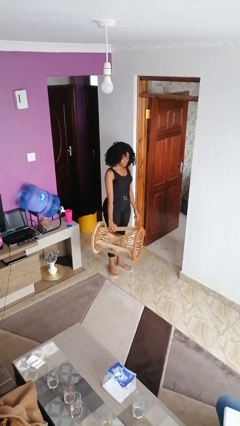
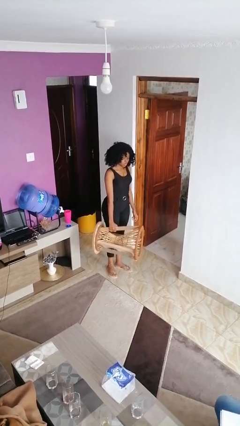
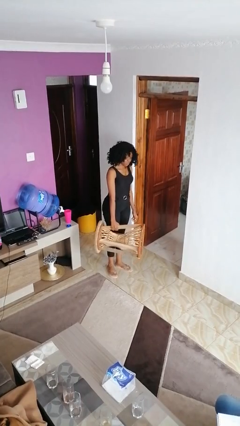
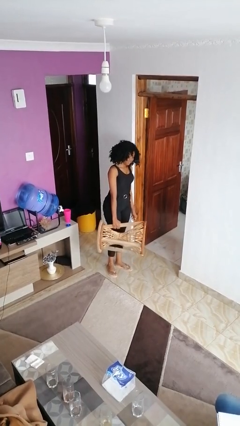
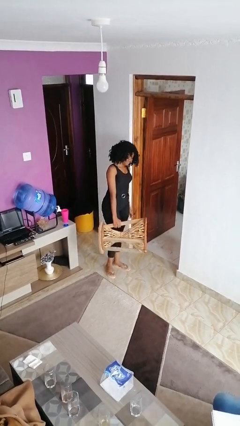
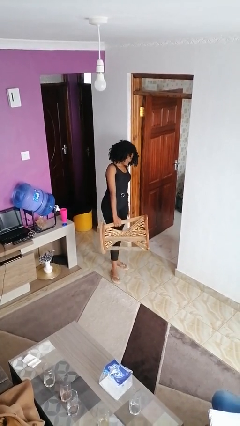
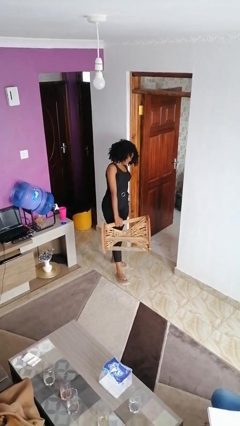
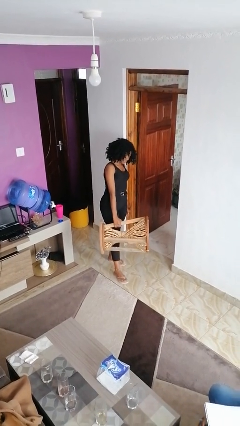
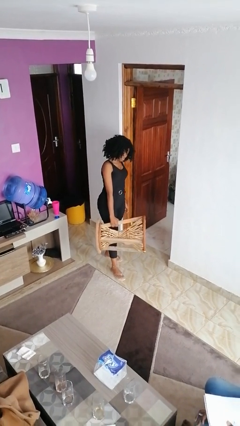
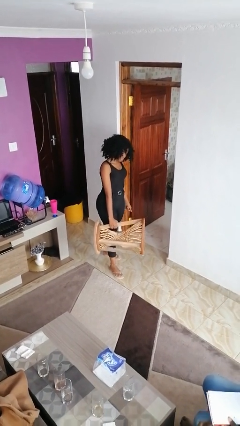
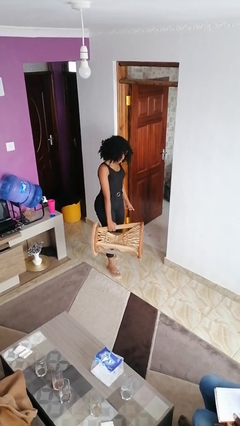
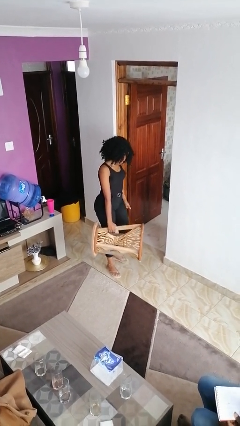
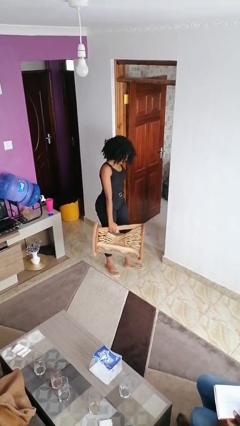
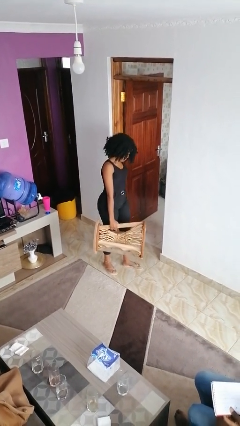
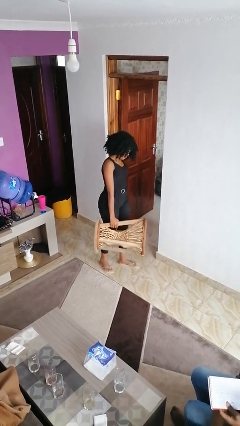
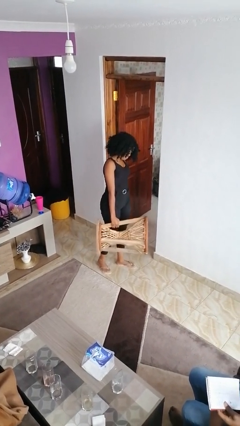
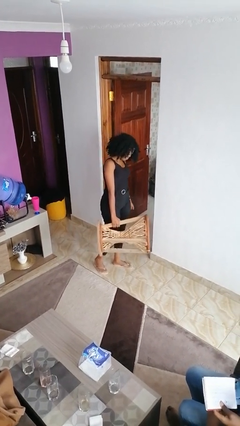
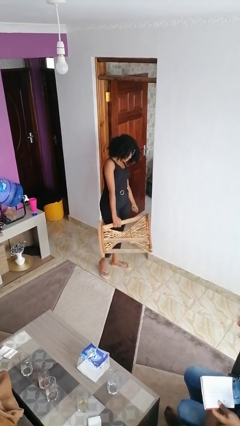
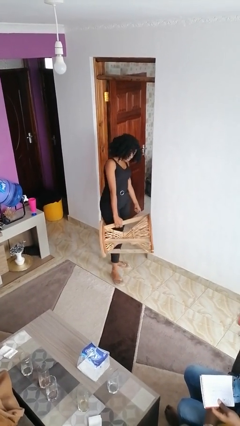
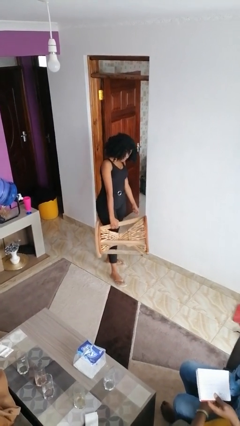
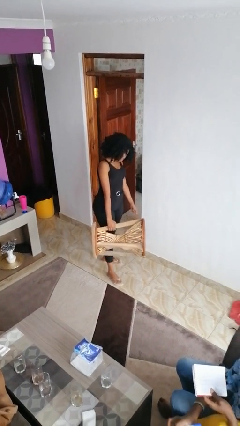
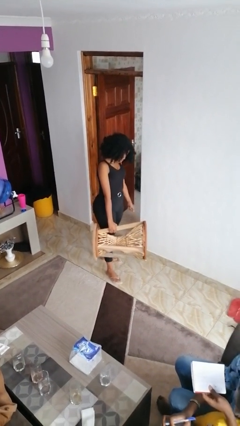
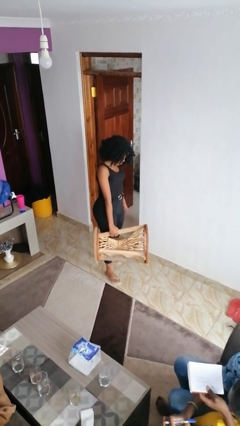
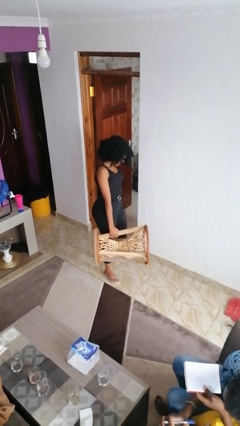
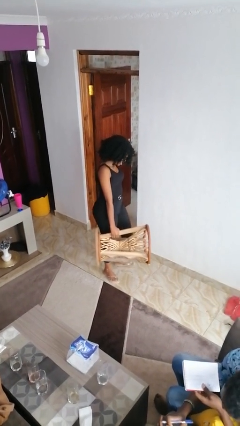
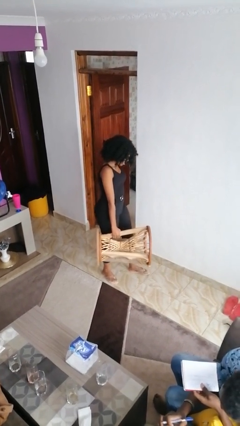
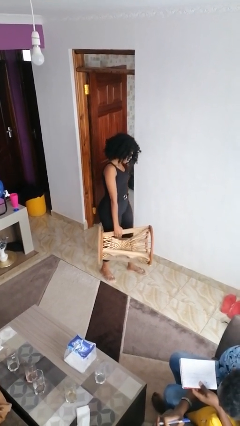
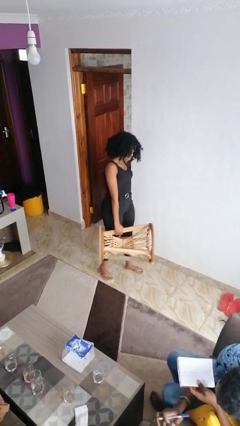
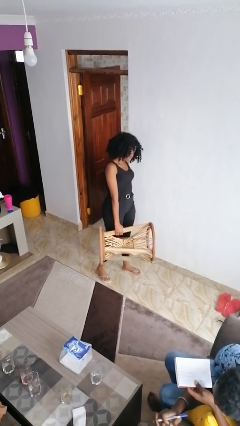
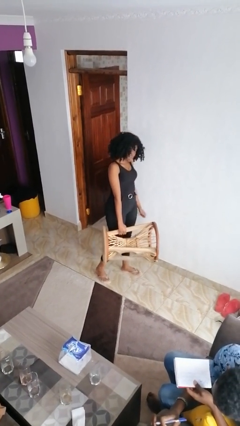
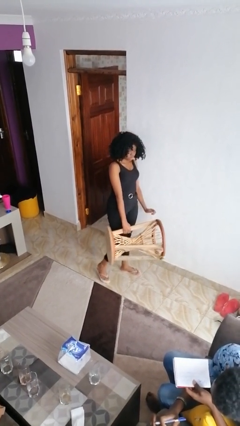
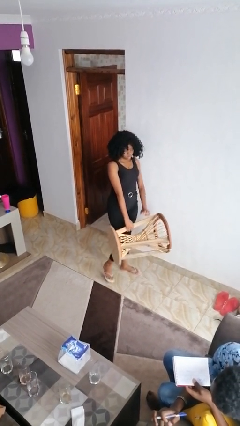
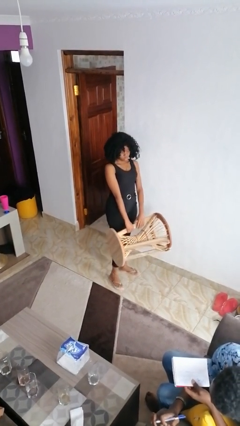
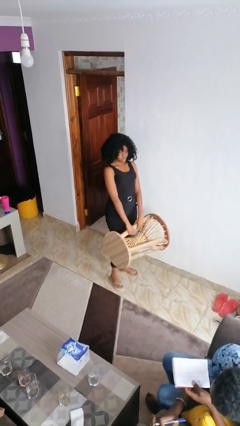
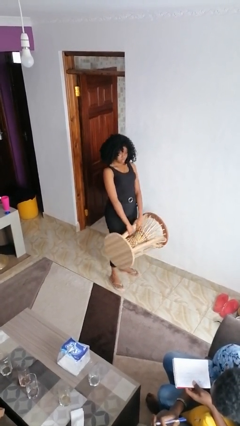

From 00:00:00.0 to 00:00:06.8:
person carries furniture

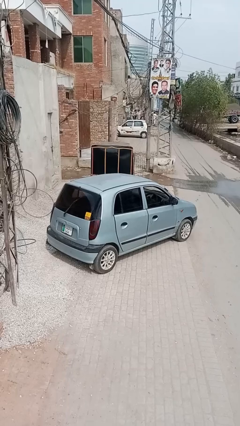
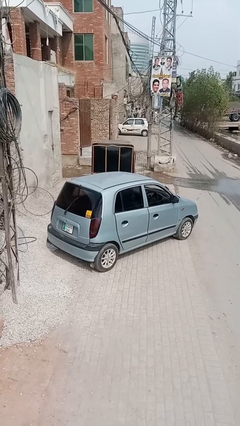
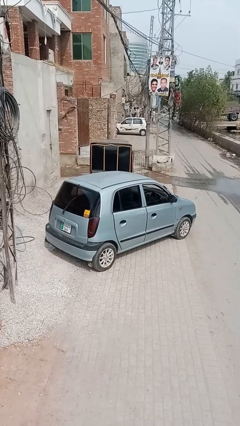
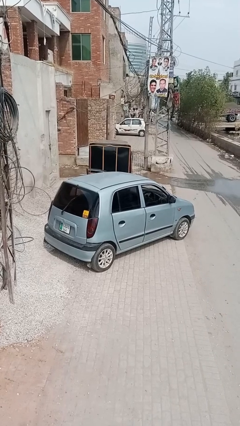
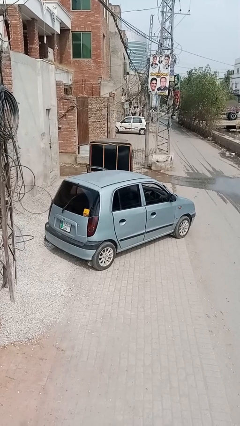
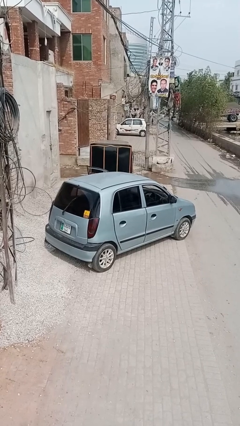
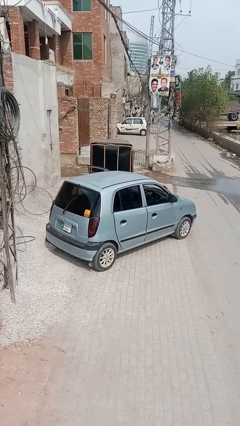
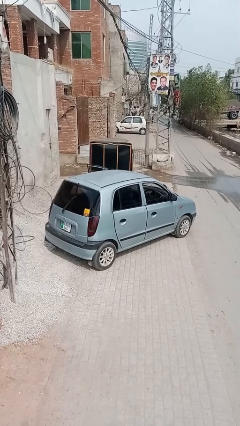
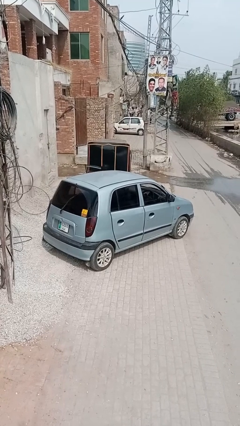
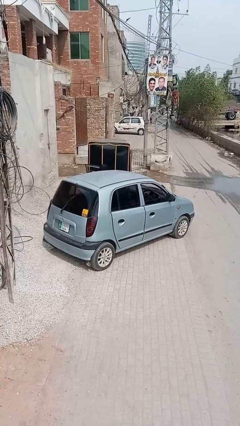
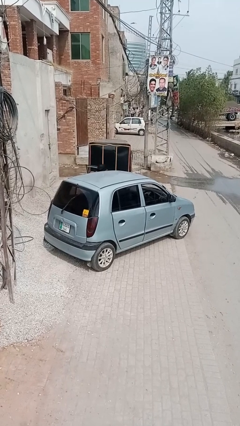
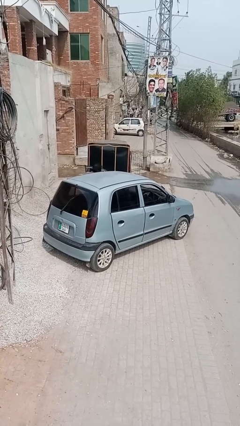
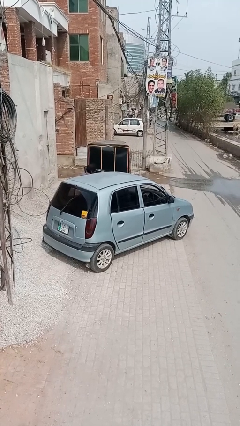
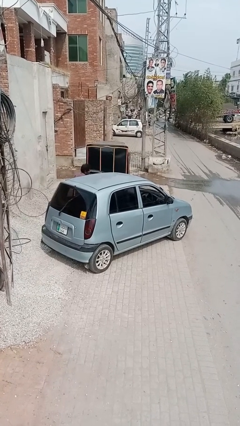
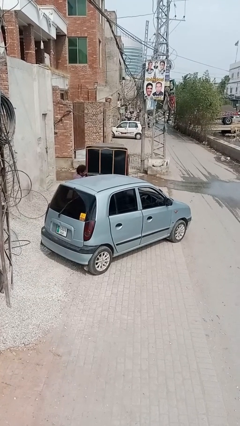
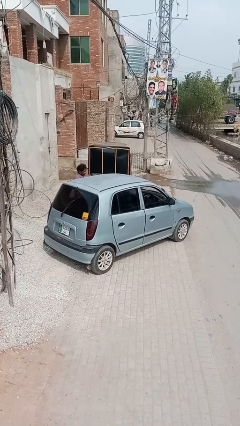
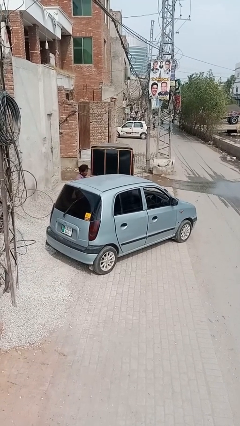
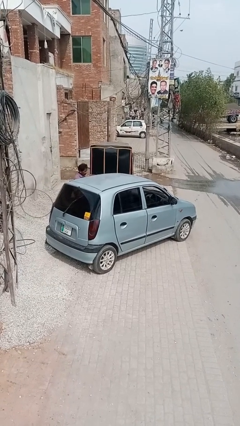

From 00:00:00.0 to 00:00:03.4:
car drops off person

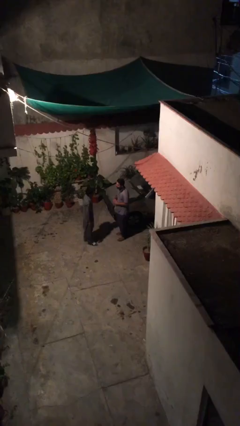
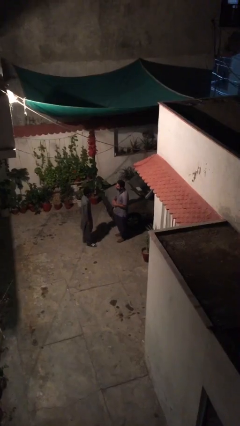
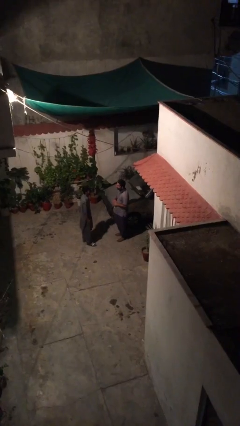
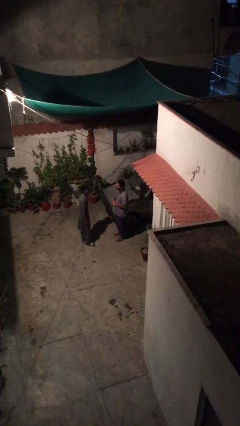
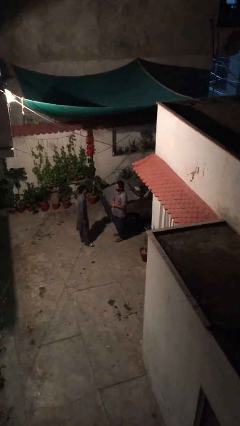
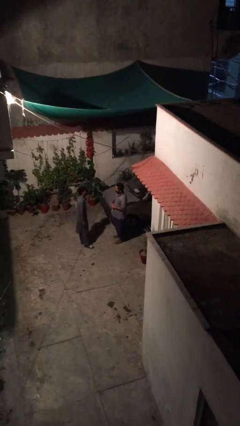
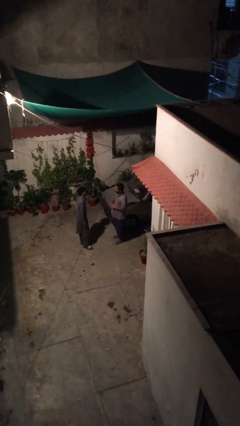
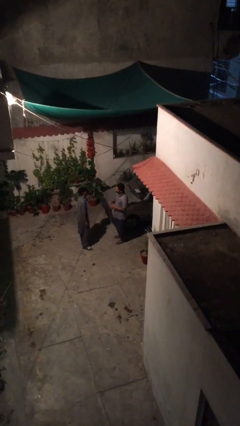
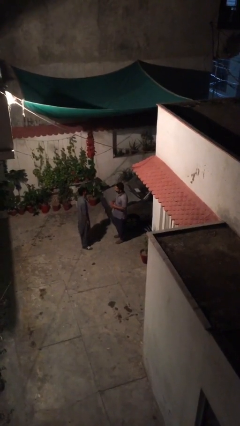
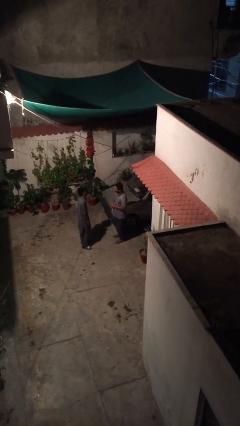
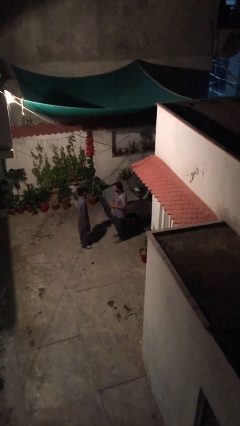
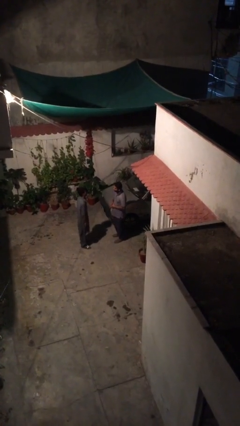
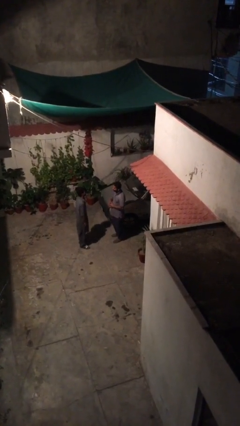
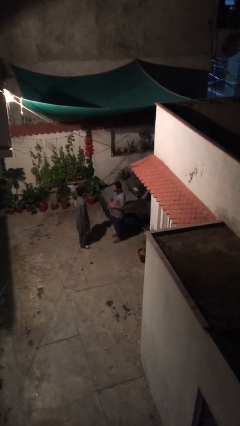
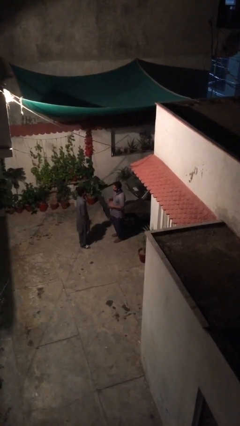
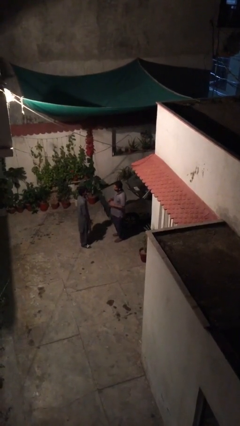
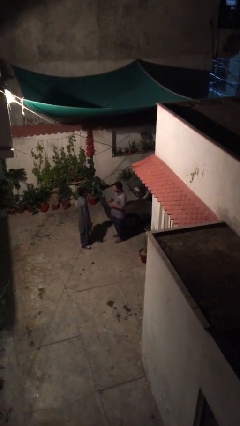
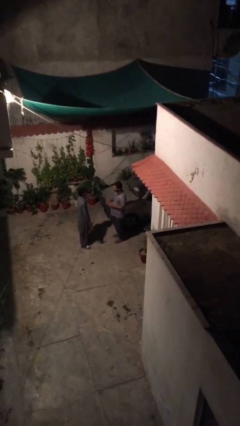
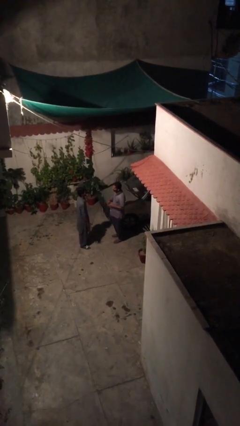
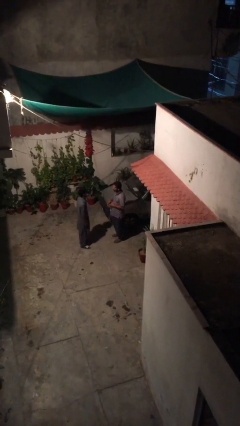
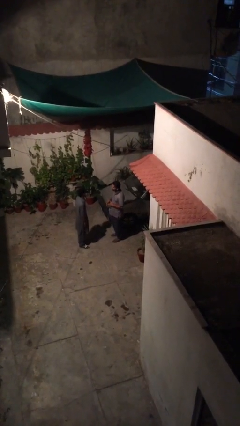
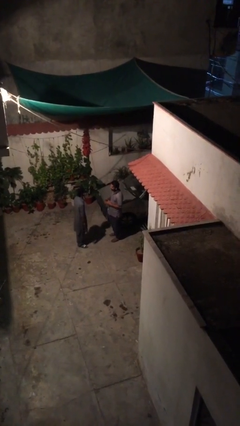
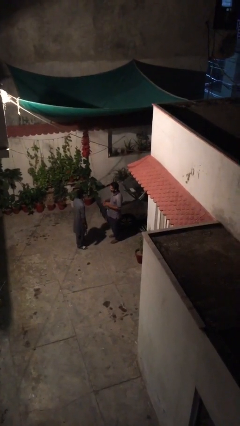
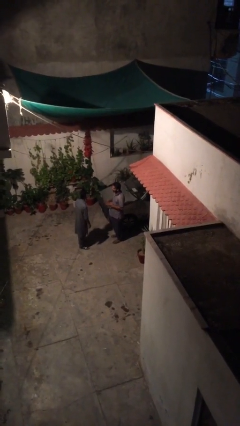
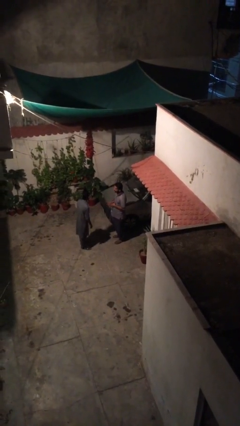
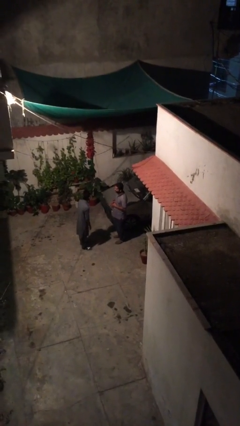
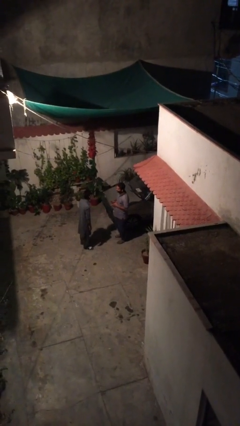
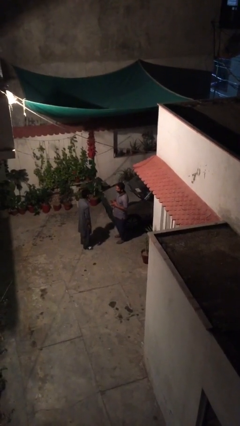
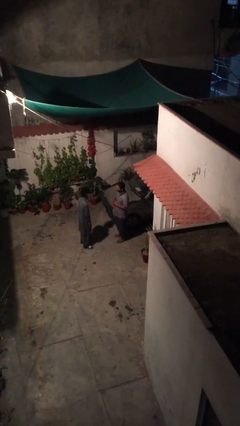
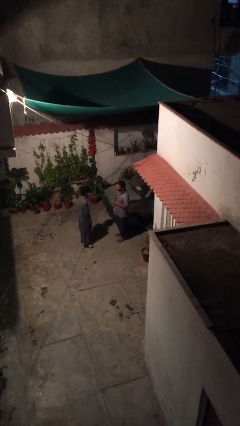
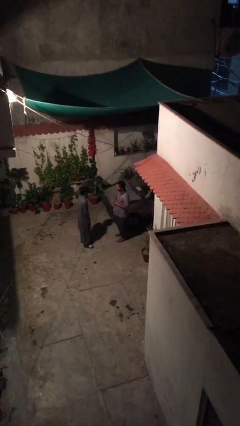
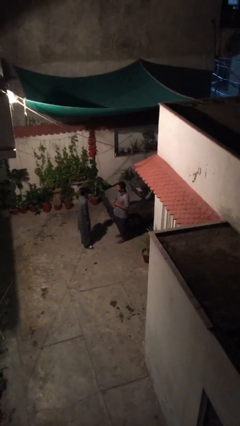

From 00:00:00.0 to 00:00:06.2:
person talks to person

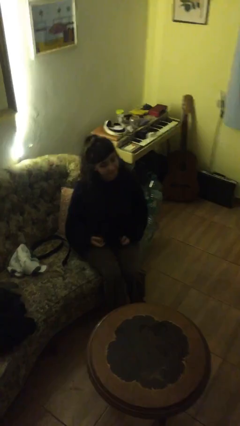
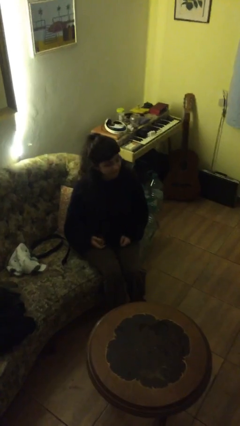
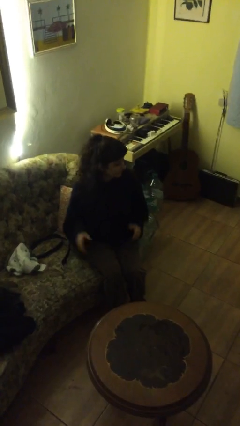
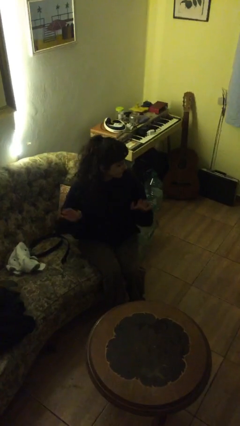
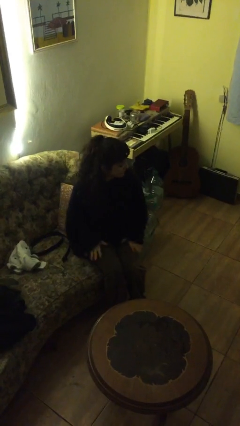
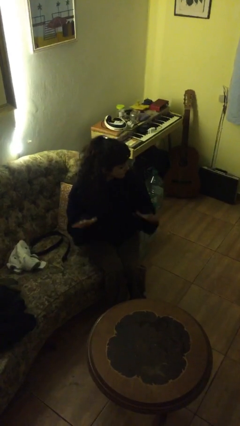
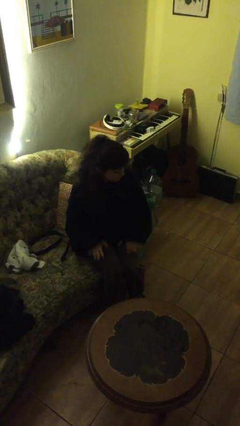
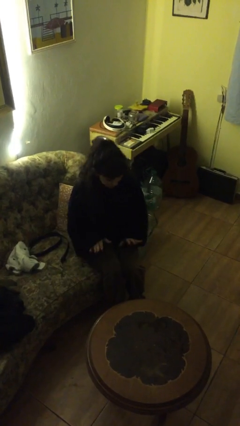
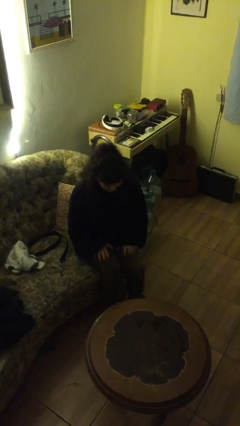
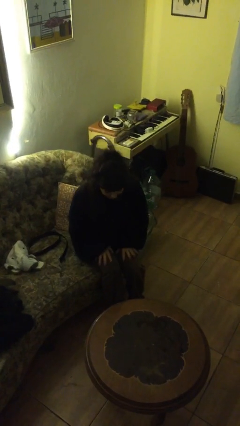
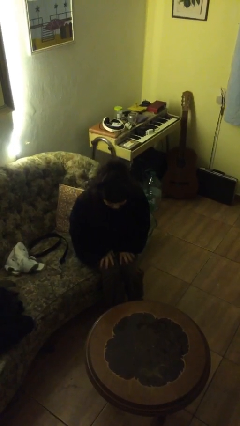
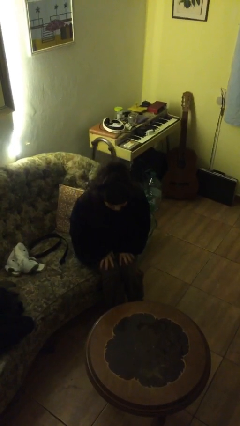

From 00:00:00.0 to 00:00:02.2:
person slaps hands on thighs
